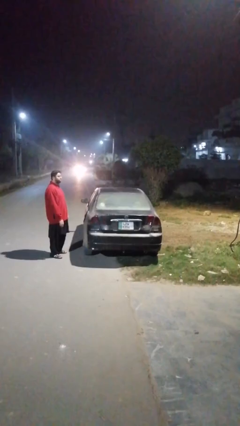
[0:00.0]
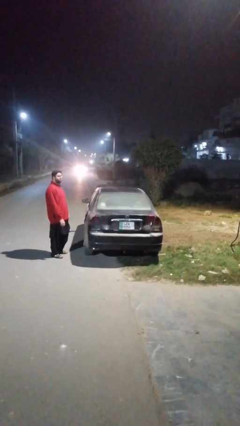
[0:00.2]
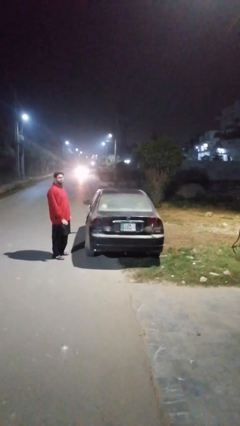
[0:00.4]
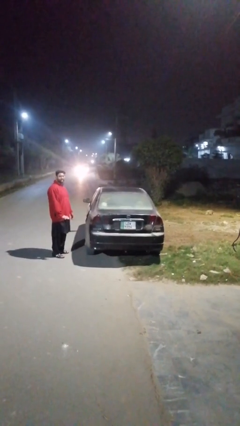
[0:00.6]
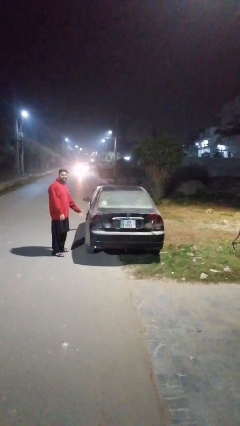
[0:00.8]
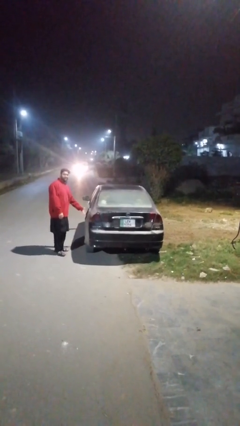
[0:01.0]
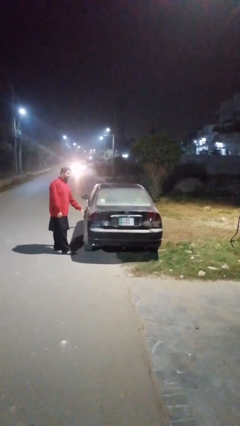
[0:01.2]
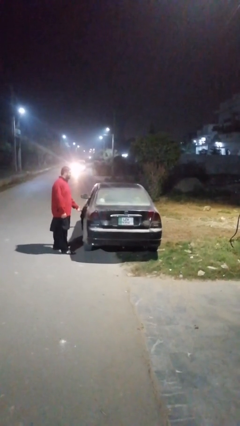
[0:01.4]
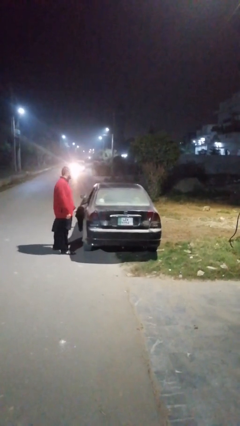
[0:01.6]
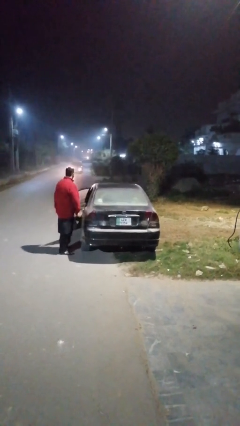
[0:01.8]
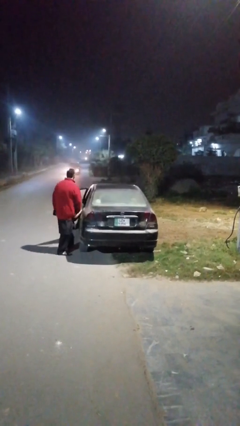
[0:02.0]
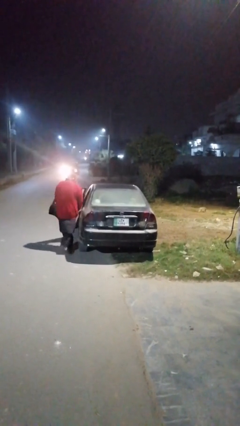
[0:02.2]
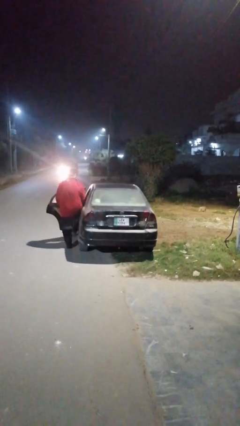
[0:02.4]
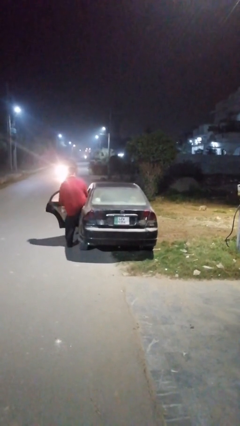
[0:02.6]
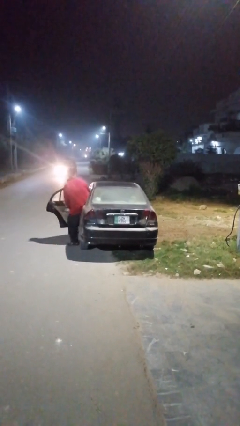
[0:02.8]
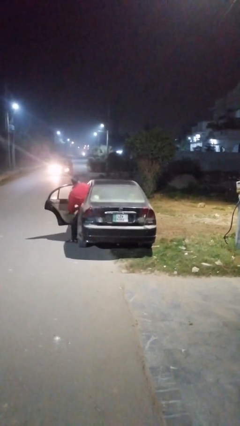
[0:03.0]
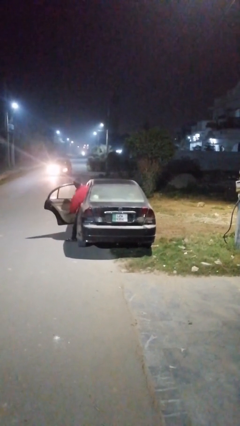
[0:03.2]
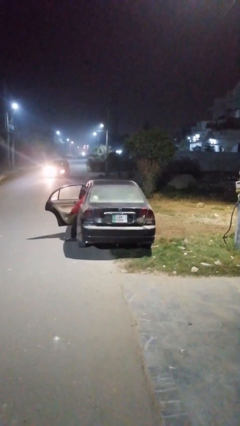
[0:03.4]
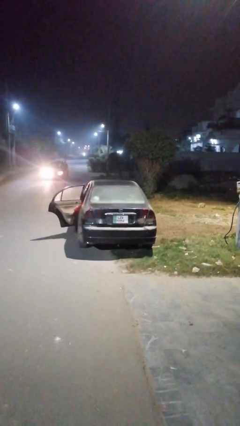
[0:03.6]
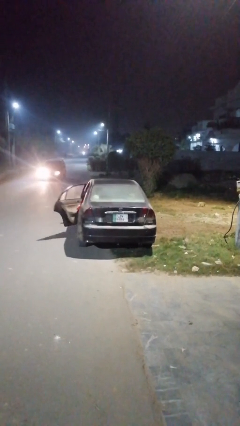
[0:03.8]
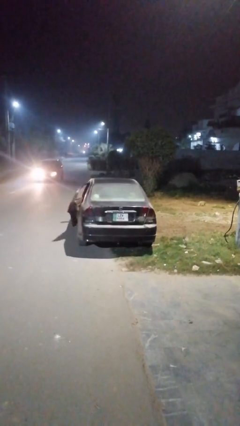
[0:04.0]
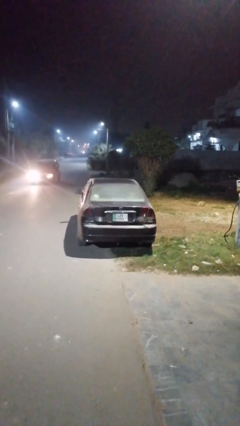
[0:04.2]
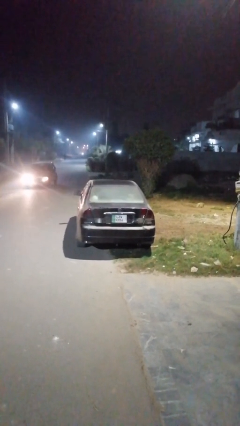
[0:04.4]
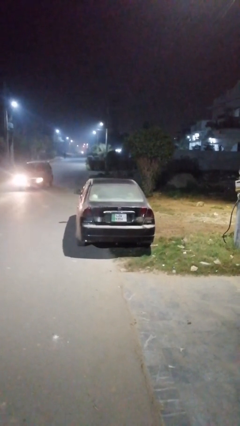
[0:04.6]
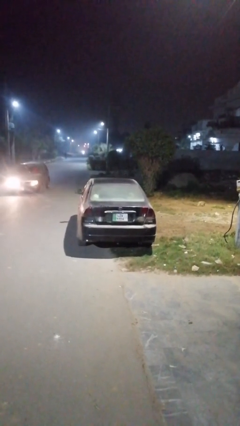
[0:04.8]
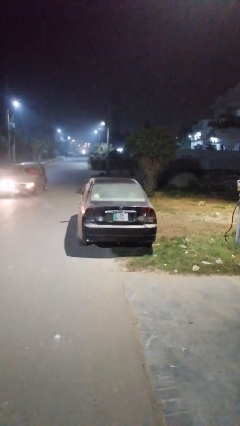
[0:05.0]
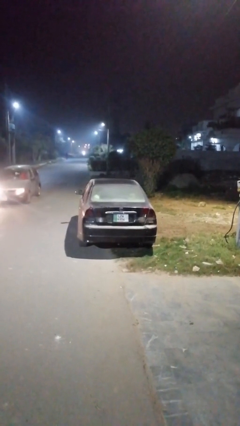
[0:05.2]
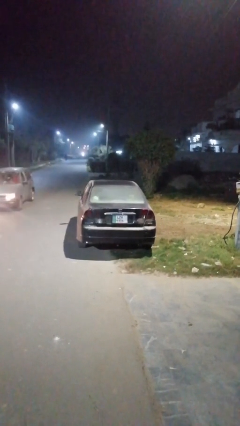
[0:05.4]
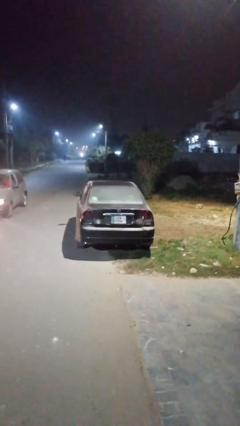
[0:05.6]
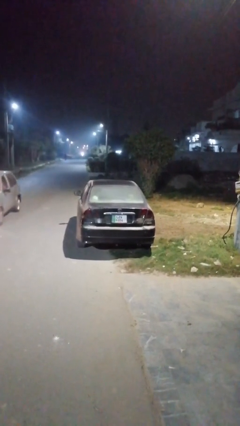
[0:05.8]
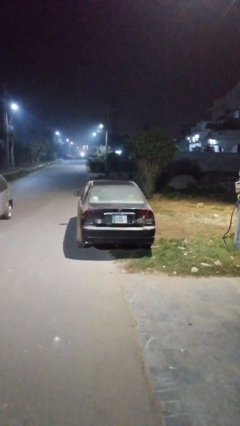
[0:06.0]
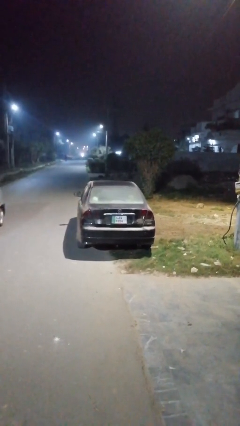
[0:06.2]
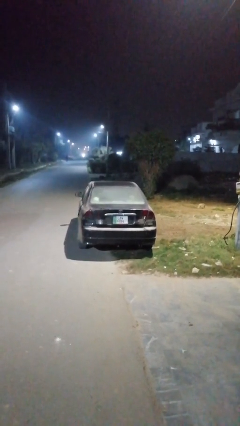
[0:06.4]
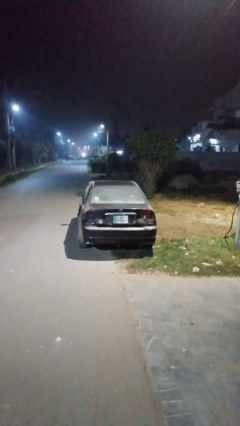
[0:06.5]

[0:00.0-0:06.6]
car picks up person

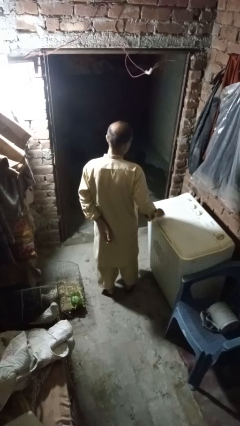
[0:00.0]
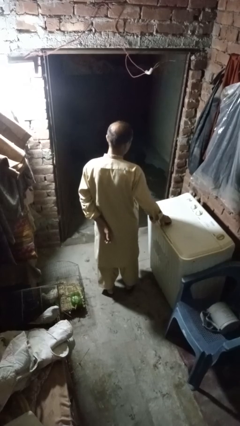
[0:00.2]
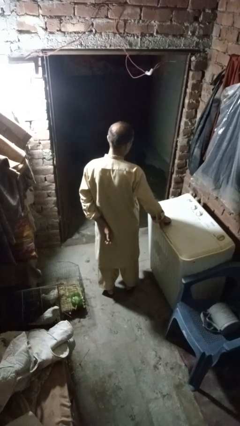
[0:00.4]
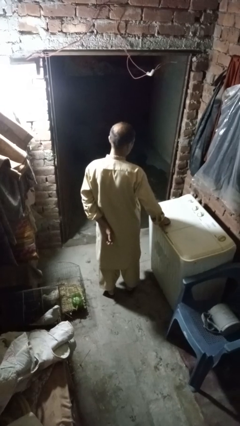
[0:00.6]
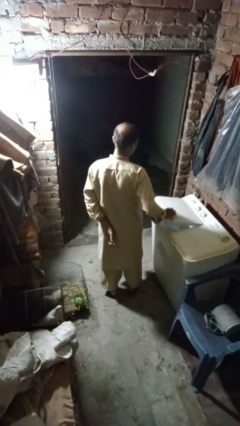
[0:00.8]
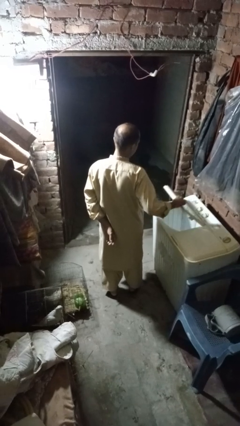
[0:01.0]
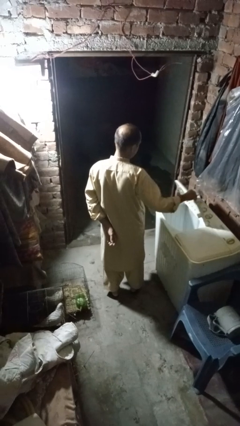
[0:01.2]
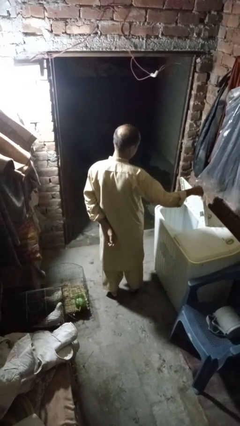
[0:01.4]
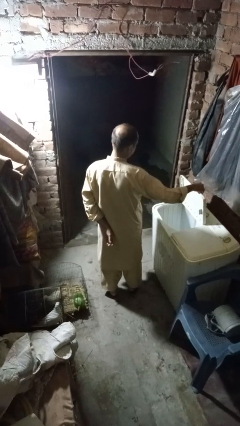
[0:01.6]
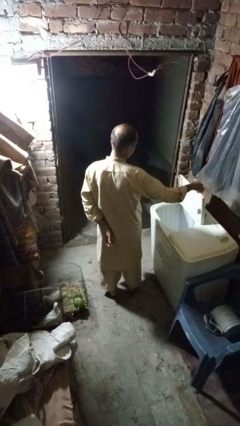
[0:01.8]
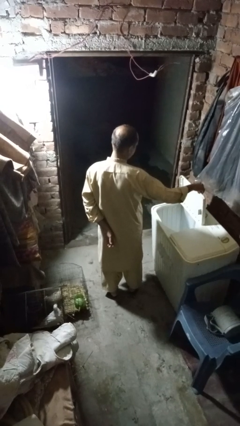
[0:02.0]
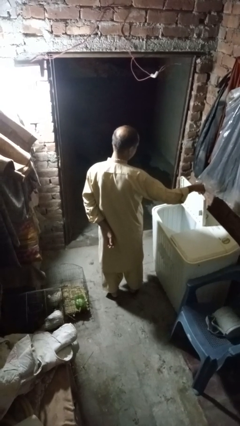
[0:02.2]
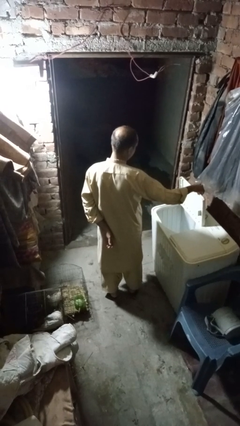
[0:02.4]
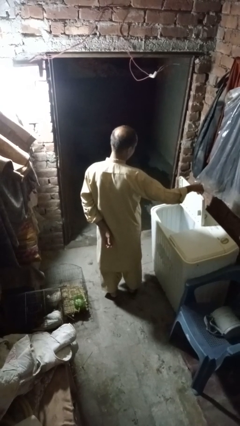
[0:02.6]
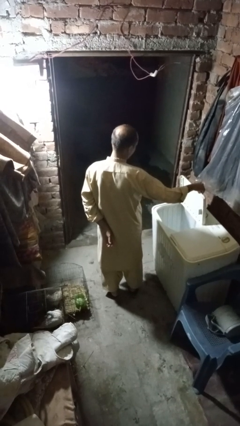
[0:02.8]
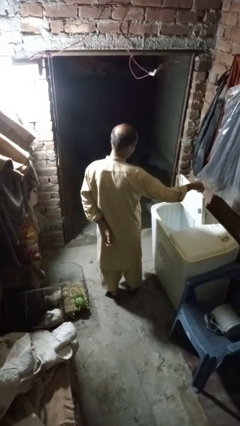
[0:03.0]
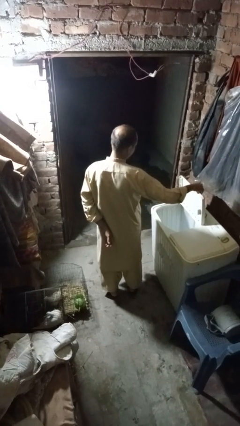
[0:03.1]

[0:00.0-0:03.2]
person opens clothes washer

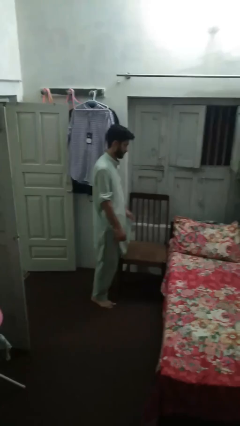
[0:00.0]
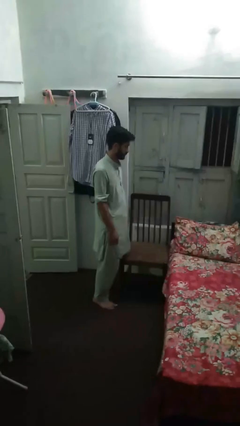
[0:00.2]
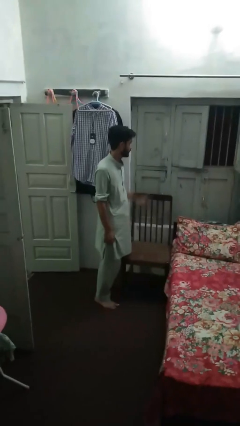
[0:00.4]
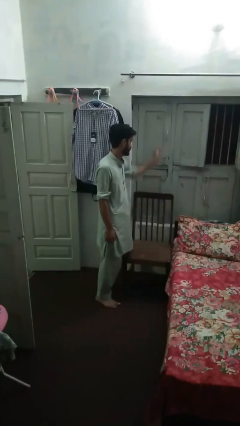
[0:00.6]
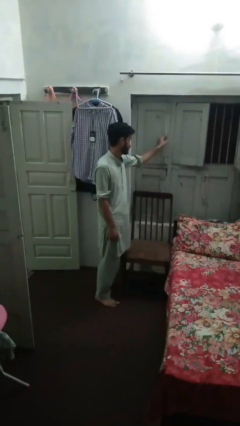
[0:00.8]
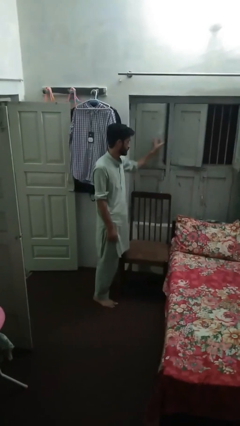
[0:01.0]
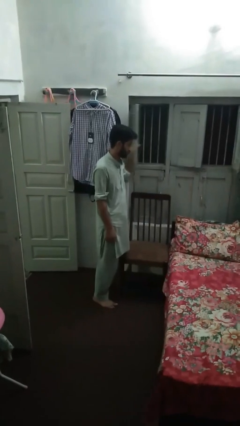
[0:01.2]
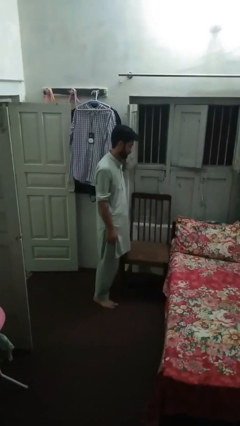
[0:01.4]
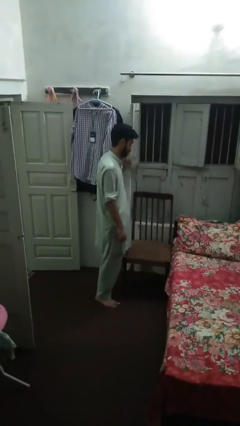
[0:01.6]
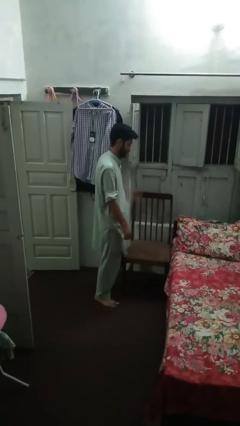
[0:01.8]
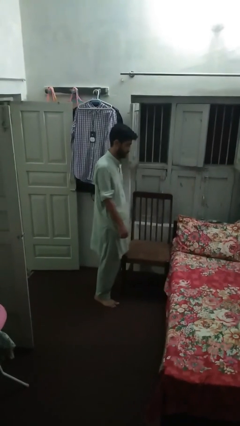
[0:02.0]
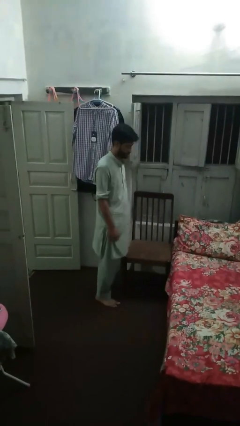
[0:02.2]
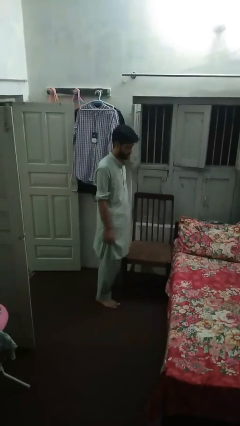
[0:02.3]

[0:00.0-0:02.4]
person opens home window

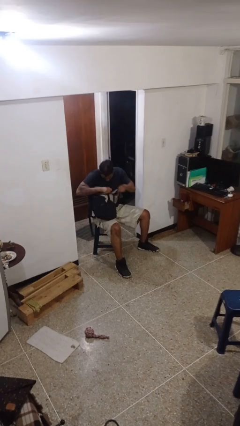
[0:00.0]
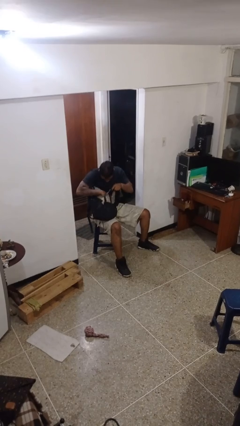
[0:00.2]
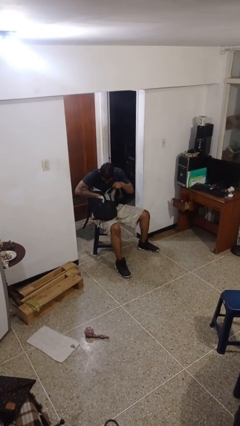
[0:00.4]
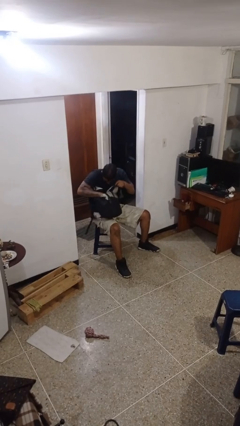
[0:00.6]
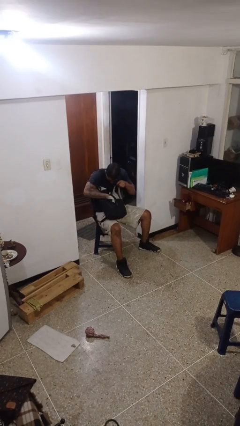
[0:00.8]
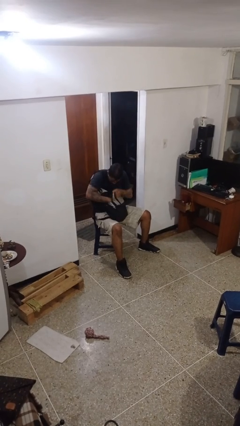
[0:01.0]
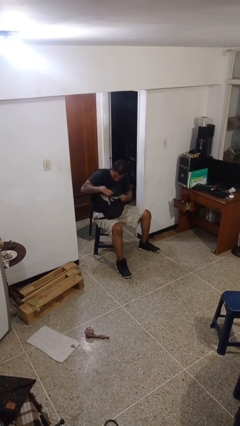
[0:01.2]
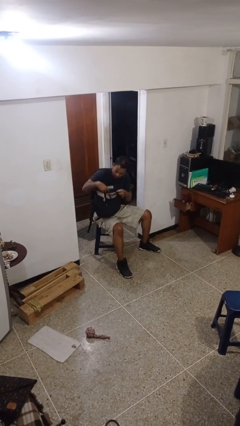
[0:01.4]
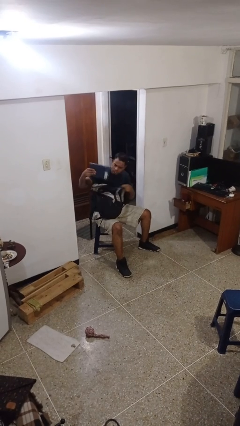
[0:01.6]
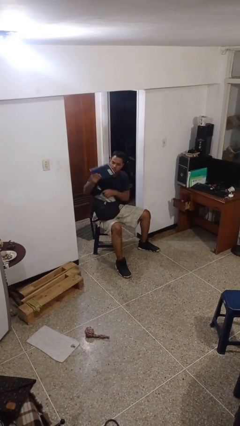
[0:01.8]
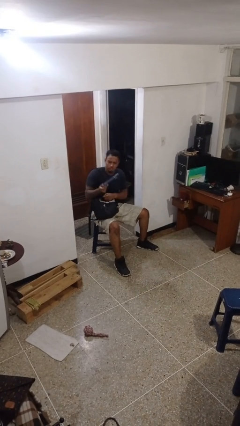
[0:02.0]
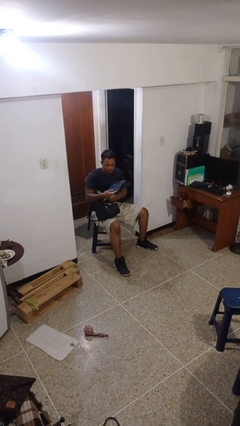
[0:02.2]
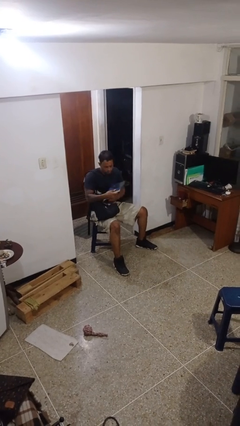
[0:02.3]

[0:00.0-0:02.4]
person takes object from backpack

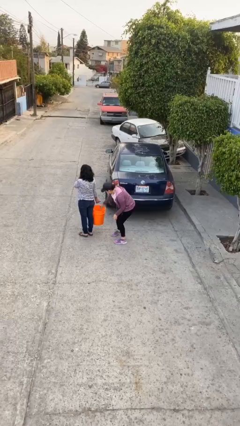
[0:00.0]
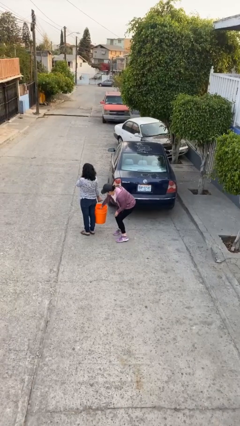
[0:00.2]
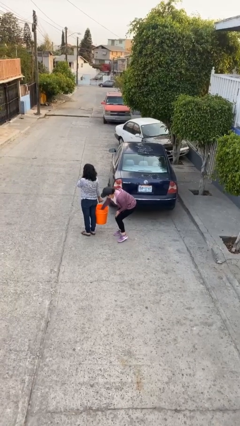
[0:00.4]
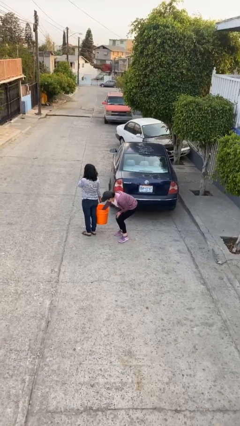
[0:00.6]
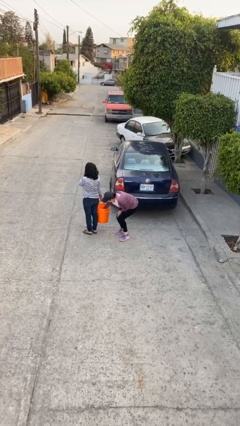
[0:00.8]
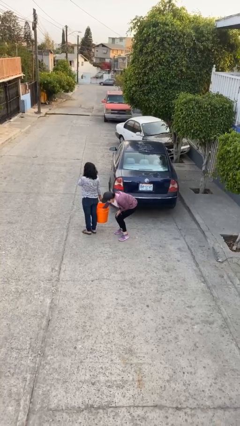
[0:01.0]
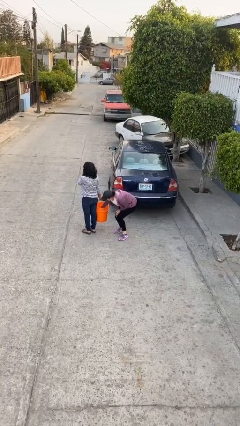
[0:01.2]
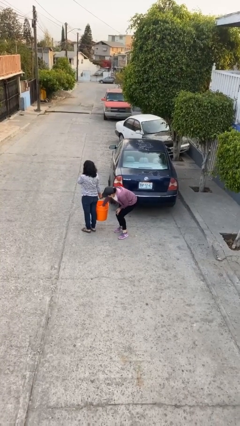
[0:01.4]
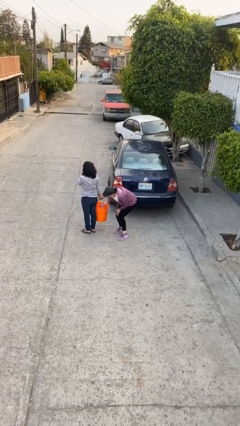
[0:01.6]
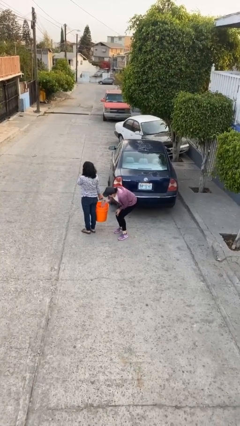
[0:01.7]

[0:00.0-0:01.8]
person steals object from person

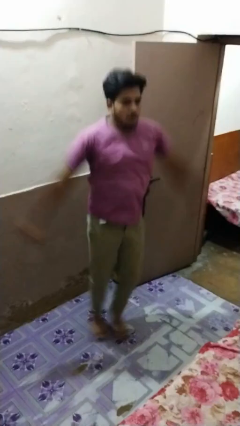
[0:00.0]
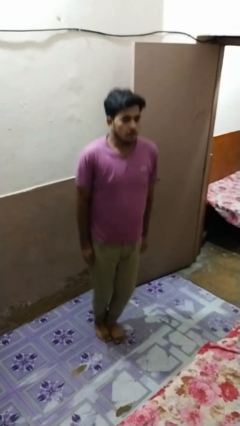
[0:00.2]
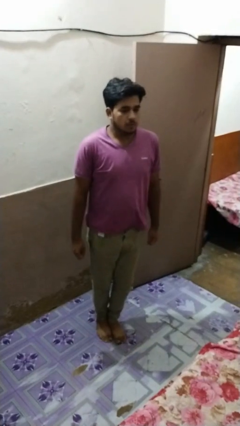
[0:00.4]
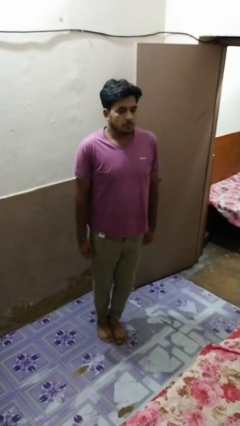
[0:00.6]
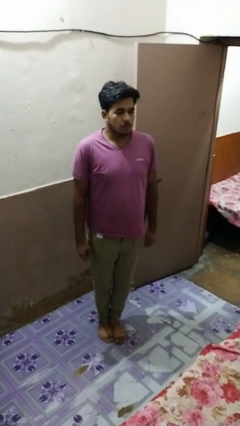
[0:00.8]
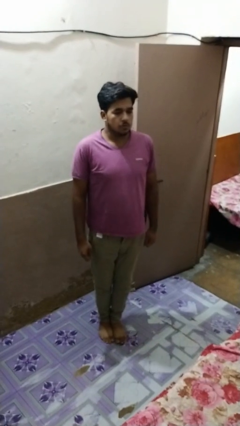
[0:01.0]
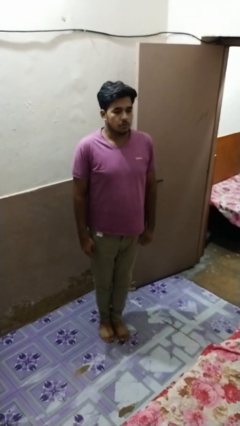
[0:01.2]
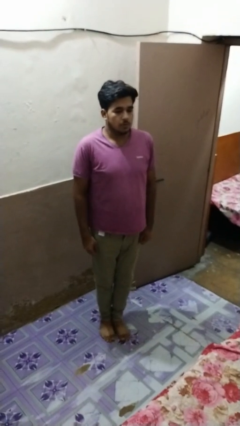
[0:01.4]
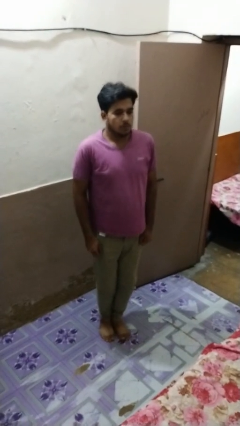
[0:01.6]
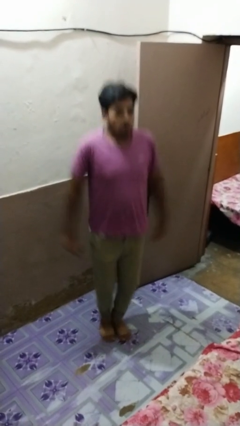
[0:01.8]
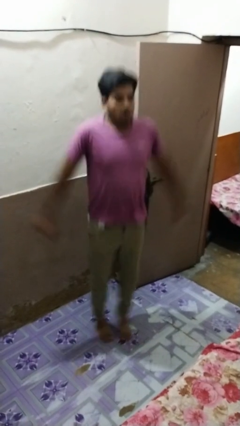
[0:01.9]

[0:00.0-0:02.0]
person exercises with jumping jacks
